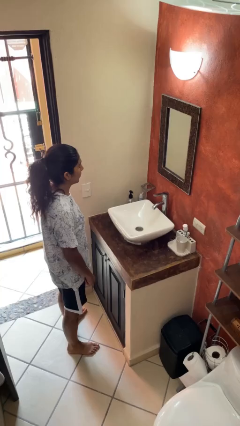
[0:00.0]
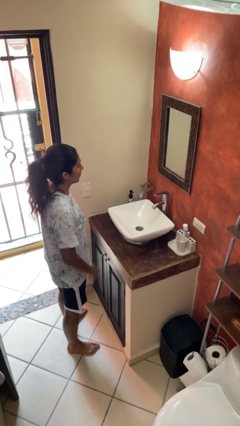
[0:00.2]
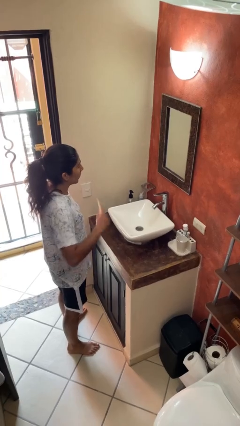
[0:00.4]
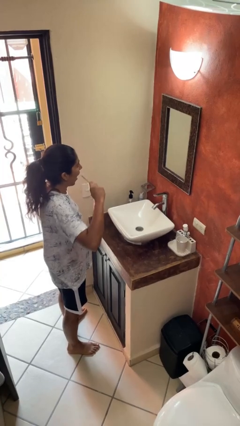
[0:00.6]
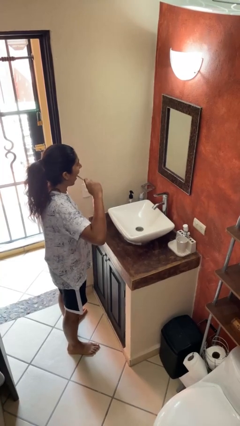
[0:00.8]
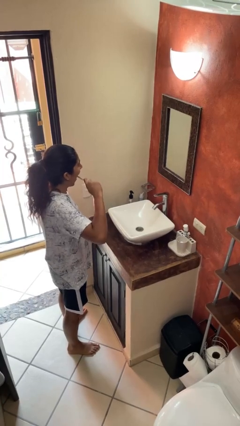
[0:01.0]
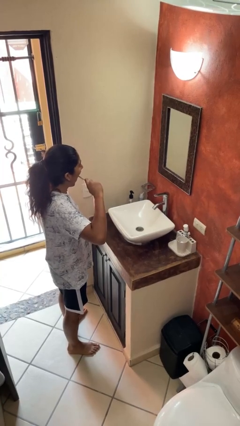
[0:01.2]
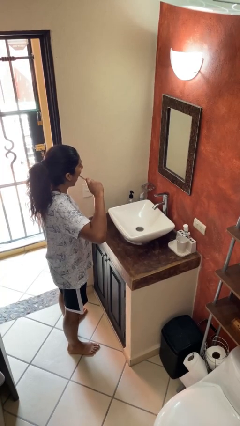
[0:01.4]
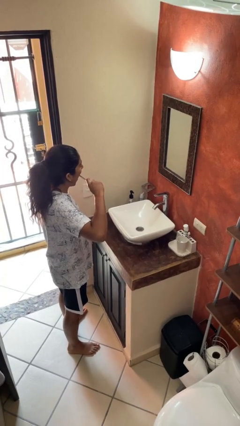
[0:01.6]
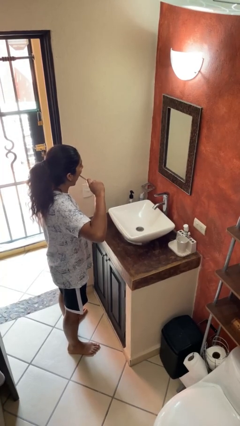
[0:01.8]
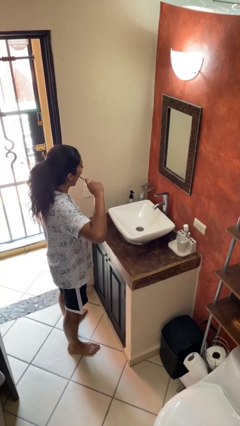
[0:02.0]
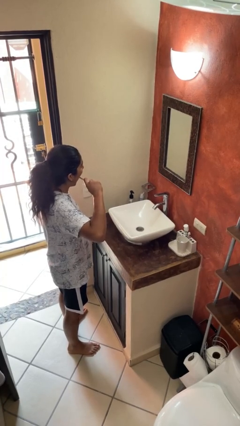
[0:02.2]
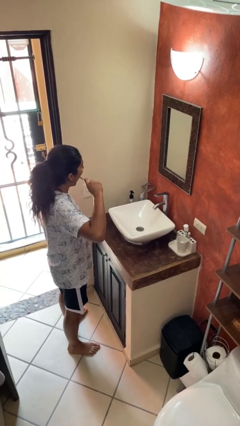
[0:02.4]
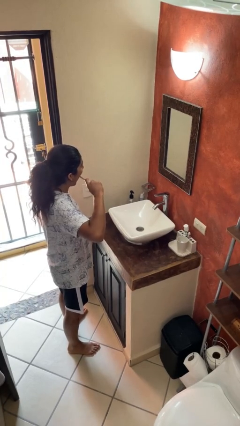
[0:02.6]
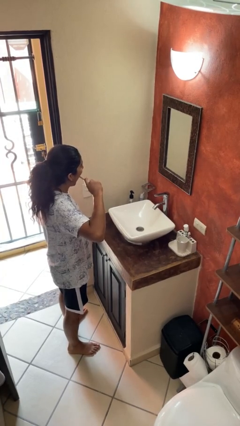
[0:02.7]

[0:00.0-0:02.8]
person brushes teeth

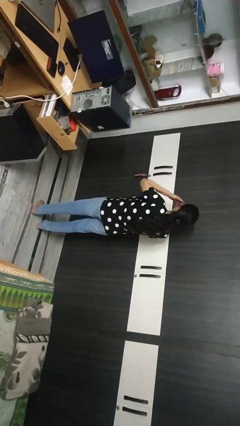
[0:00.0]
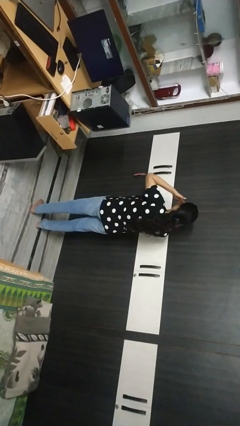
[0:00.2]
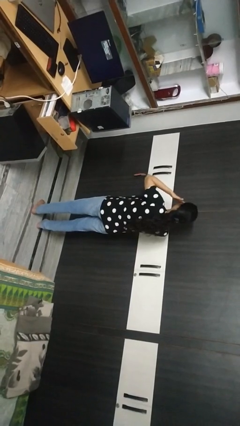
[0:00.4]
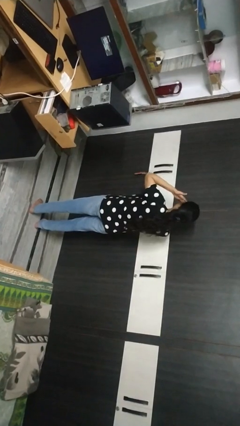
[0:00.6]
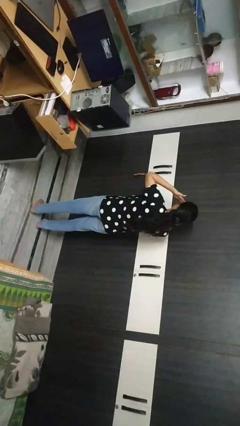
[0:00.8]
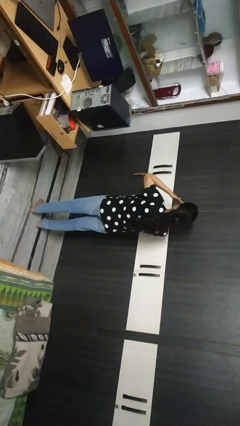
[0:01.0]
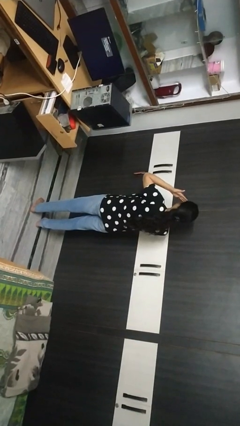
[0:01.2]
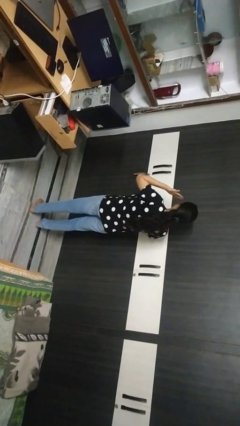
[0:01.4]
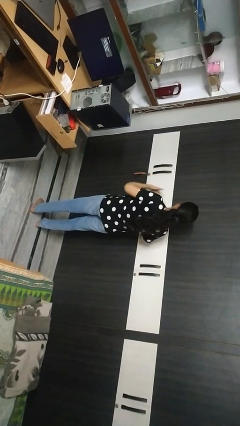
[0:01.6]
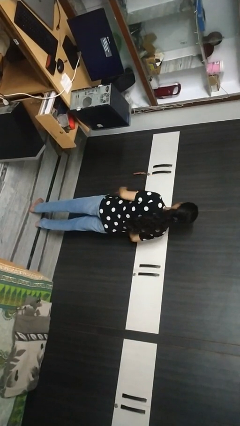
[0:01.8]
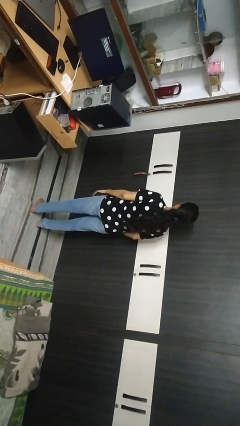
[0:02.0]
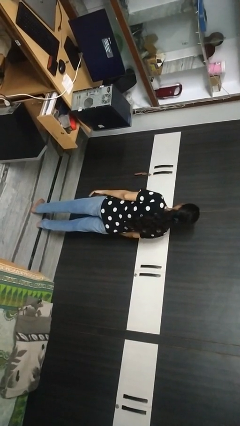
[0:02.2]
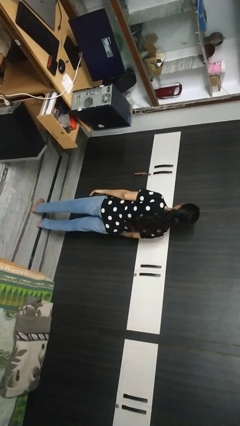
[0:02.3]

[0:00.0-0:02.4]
person rubs eyes

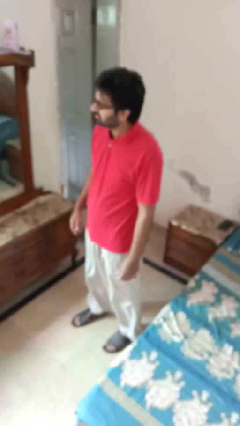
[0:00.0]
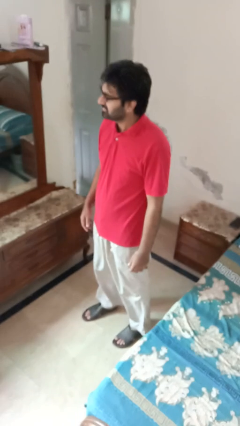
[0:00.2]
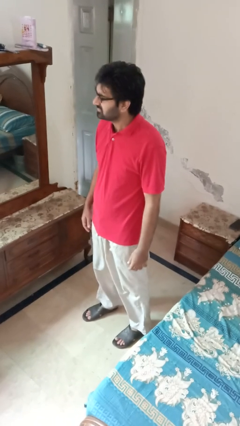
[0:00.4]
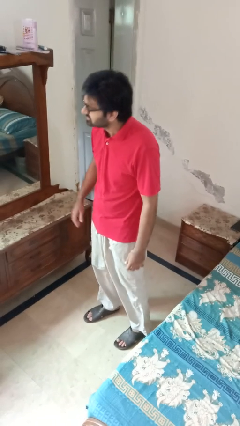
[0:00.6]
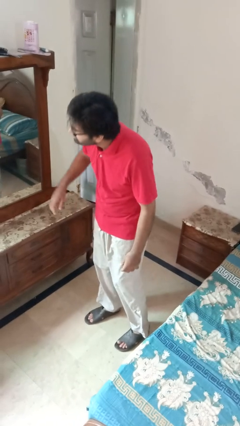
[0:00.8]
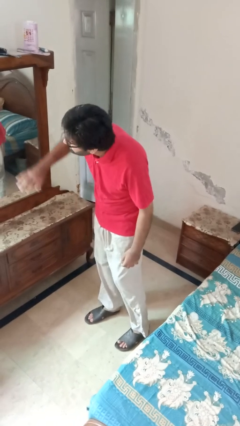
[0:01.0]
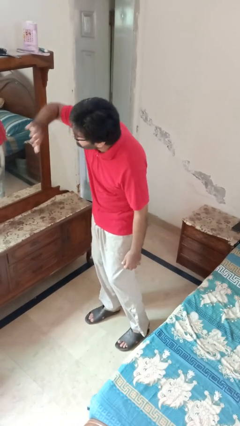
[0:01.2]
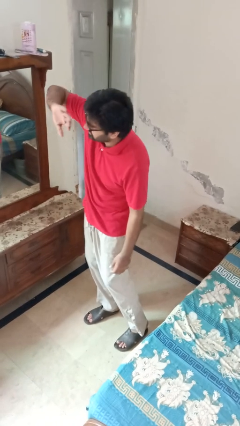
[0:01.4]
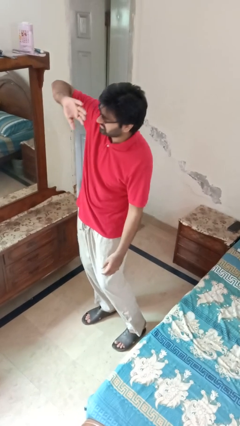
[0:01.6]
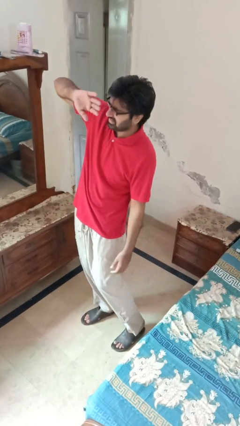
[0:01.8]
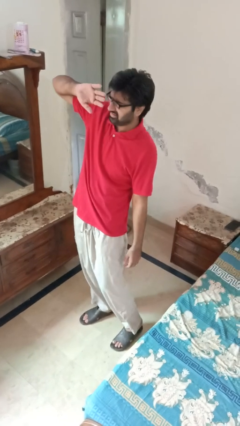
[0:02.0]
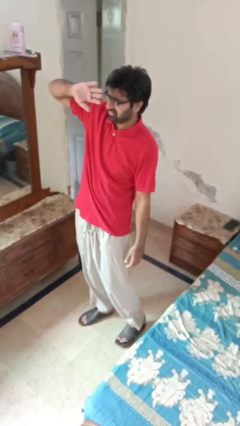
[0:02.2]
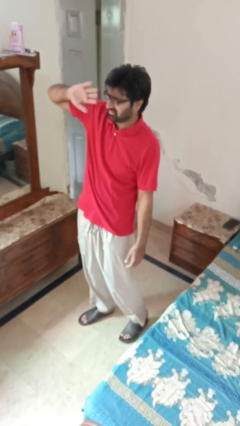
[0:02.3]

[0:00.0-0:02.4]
person shades eyes

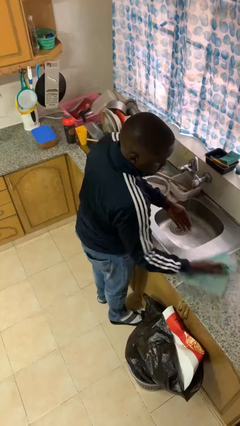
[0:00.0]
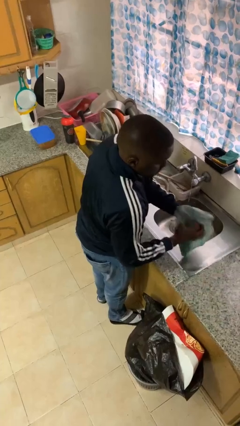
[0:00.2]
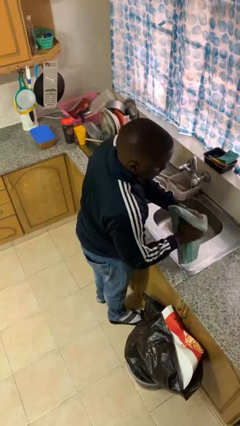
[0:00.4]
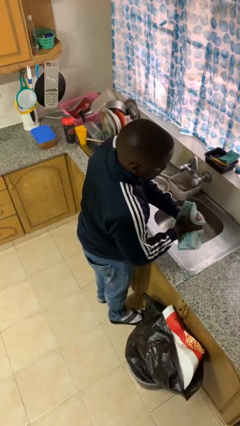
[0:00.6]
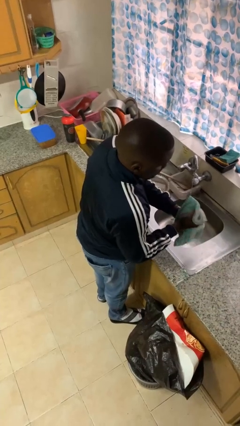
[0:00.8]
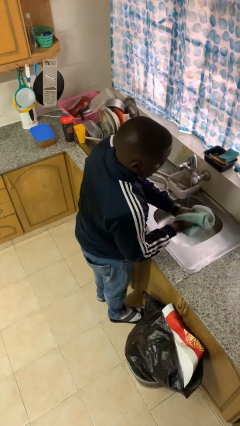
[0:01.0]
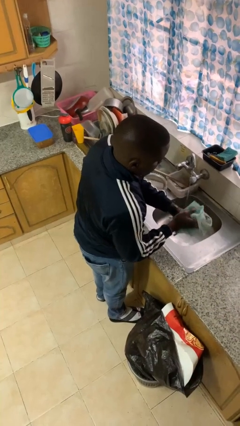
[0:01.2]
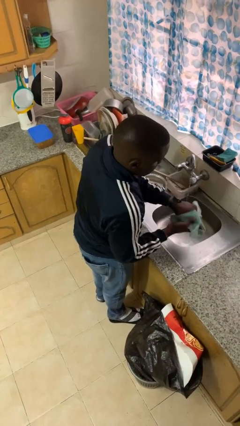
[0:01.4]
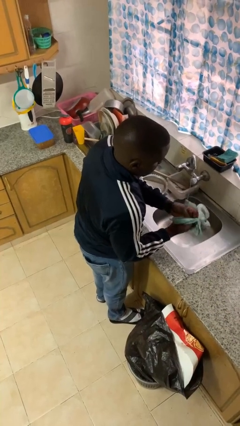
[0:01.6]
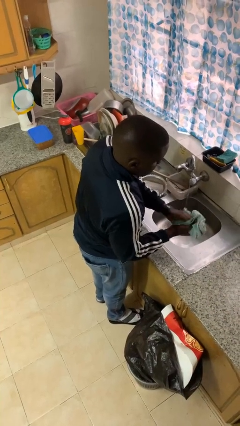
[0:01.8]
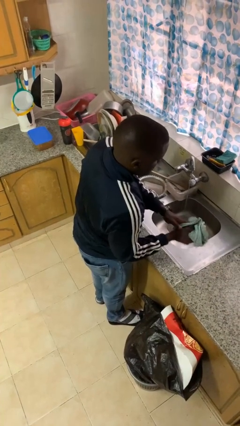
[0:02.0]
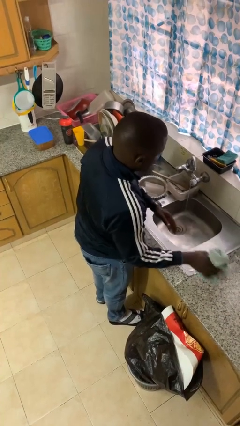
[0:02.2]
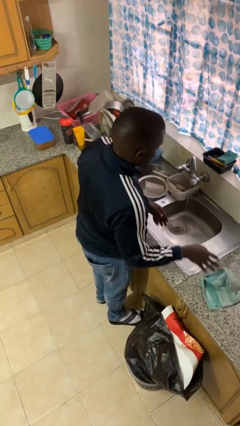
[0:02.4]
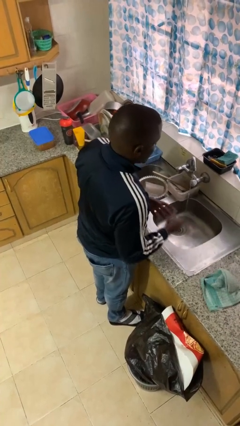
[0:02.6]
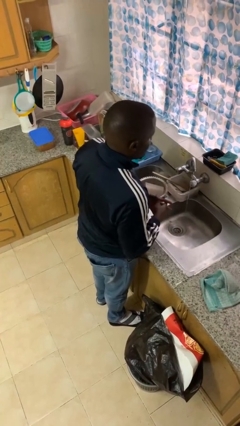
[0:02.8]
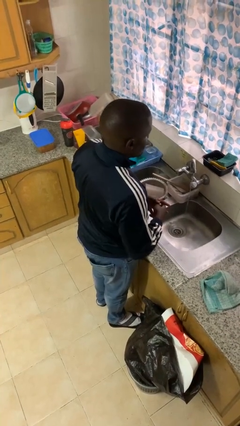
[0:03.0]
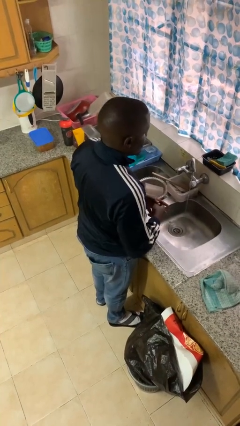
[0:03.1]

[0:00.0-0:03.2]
person dries hands with towel

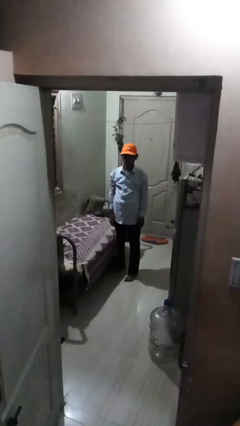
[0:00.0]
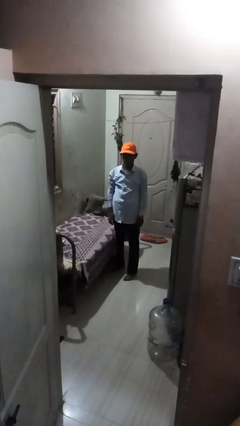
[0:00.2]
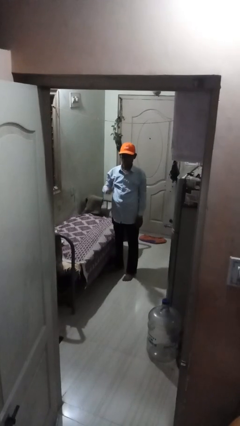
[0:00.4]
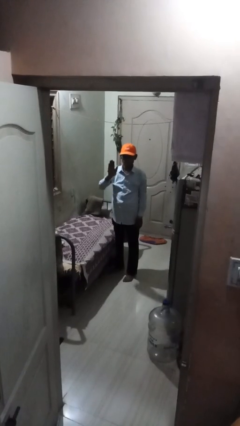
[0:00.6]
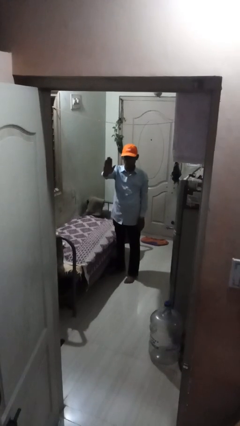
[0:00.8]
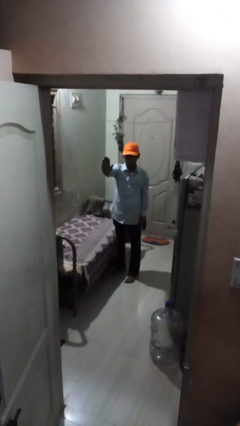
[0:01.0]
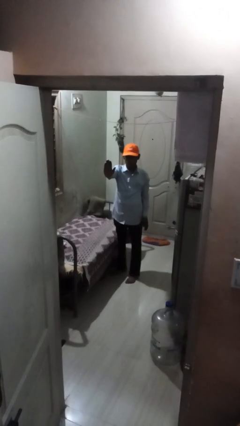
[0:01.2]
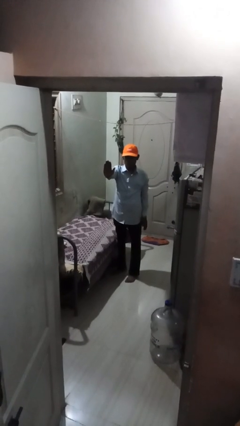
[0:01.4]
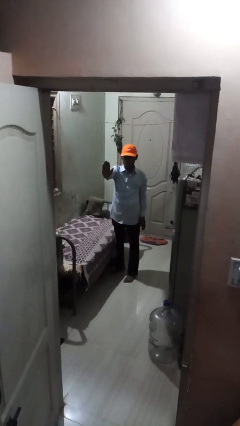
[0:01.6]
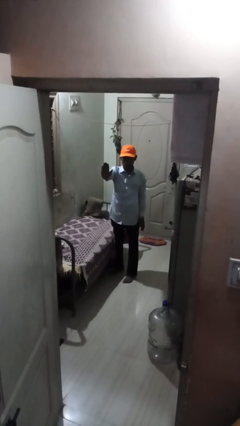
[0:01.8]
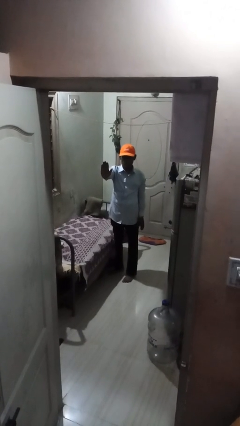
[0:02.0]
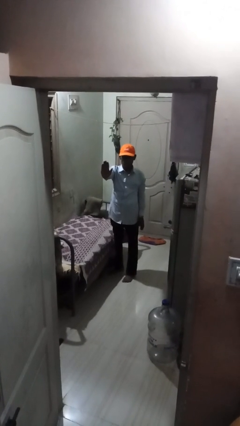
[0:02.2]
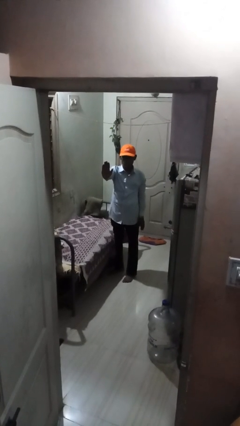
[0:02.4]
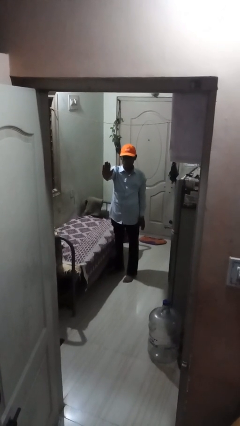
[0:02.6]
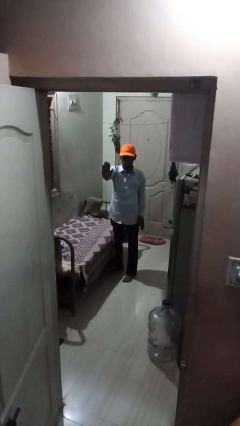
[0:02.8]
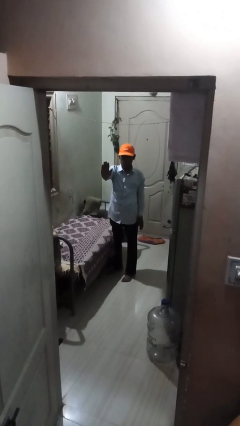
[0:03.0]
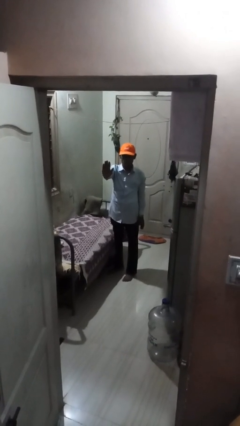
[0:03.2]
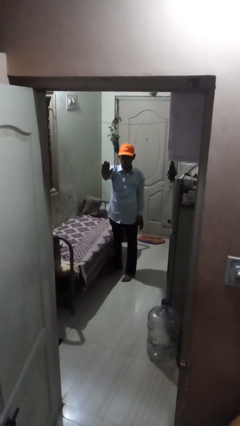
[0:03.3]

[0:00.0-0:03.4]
person gestures stop

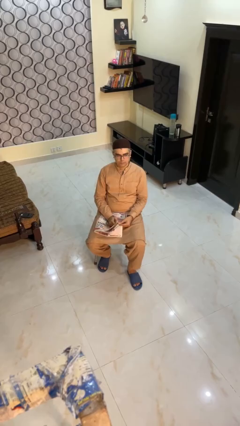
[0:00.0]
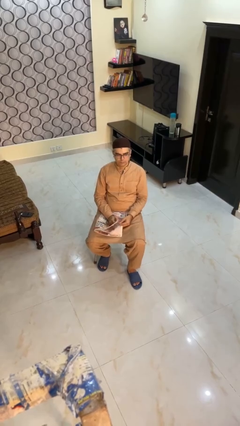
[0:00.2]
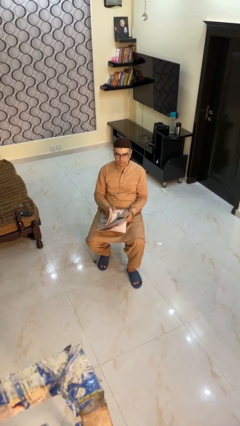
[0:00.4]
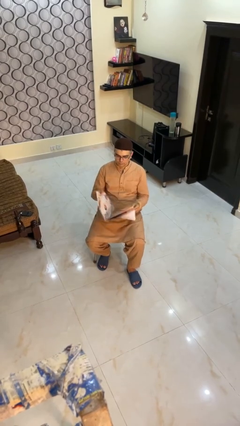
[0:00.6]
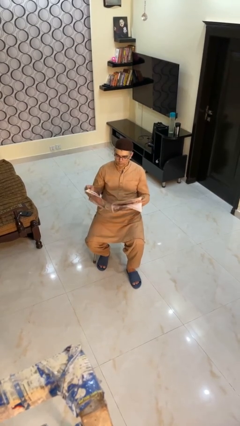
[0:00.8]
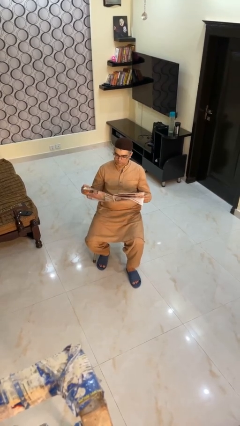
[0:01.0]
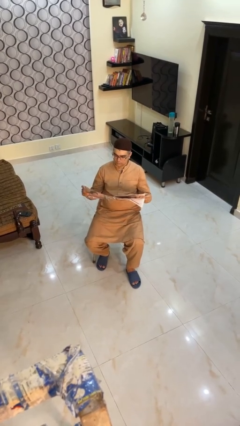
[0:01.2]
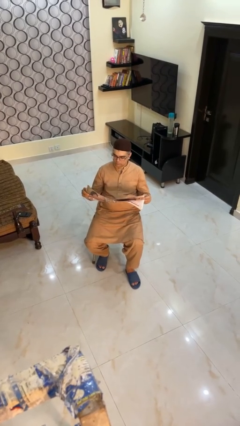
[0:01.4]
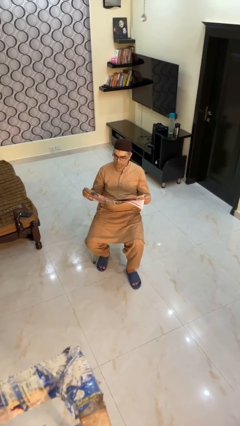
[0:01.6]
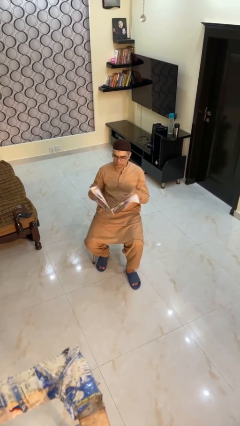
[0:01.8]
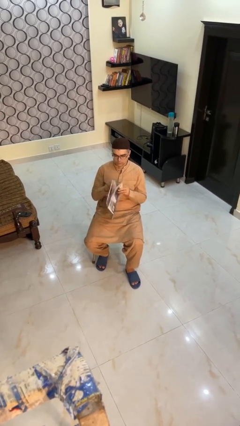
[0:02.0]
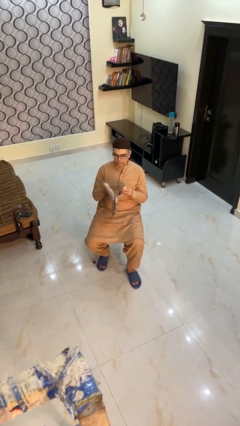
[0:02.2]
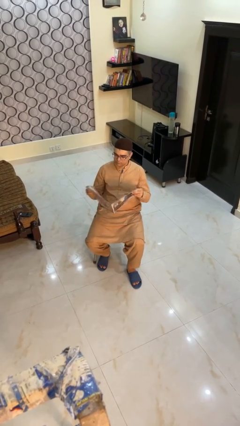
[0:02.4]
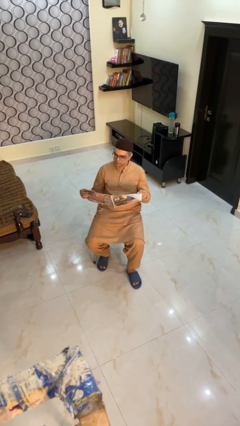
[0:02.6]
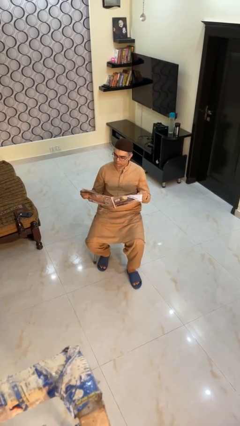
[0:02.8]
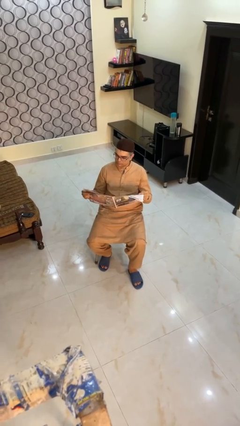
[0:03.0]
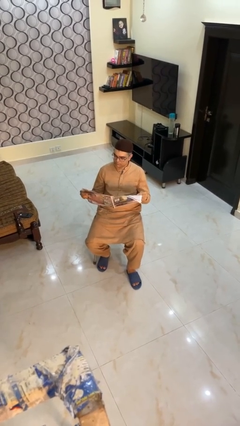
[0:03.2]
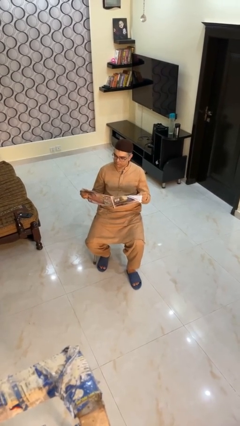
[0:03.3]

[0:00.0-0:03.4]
person reads magazine

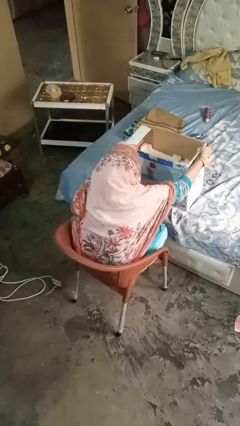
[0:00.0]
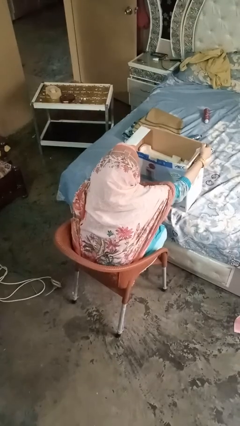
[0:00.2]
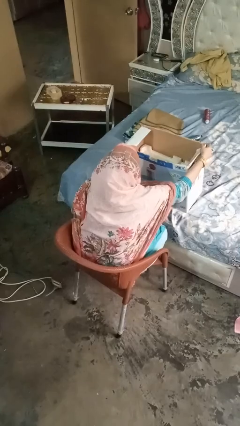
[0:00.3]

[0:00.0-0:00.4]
person closes box
